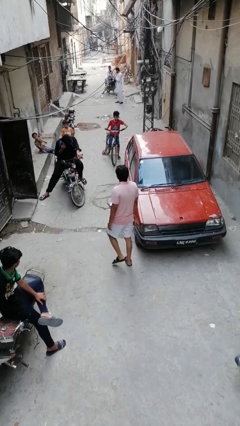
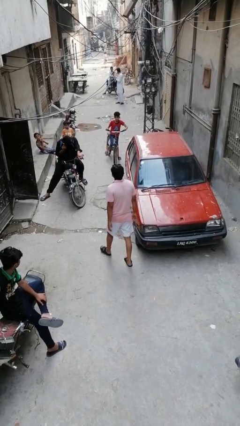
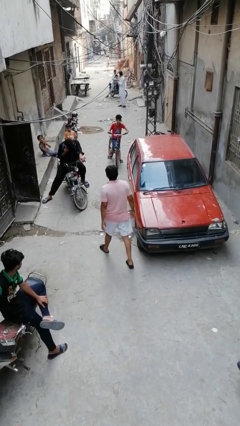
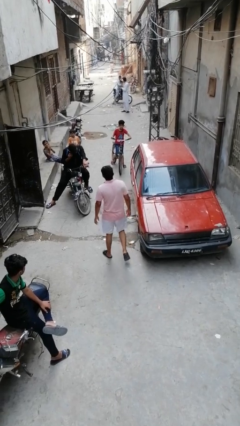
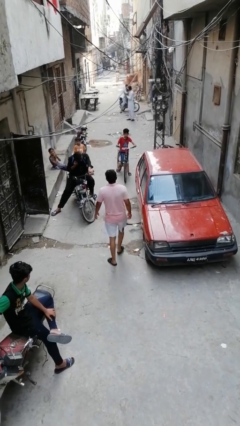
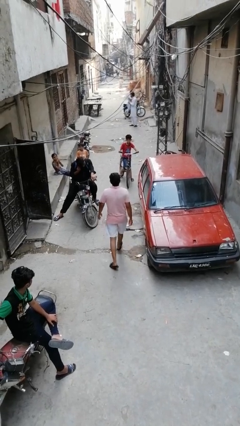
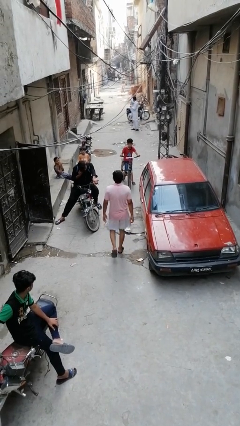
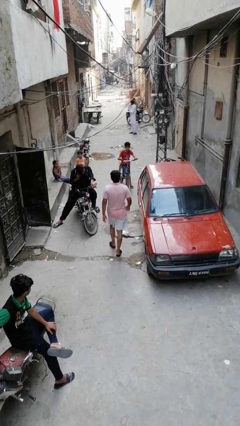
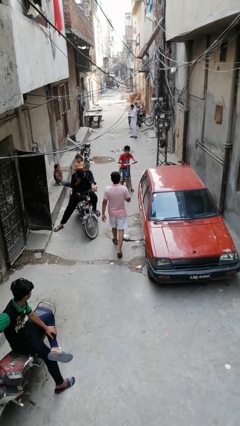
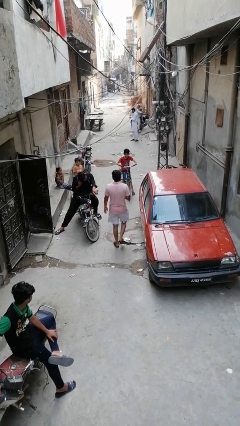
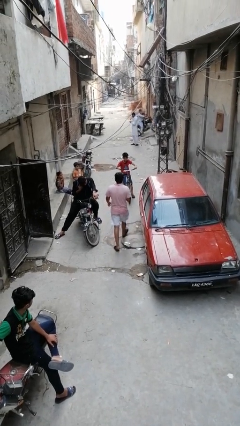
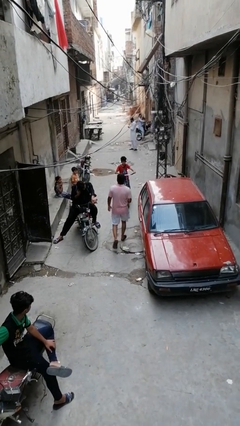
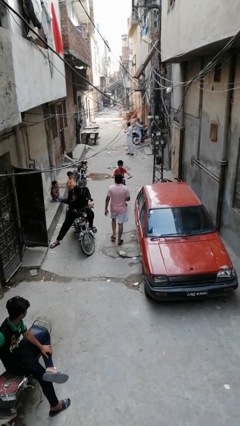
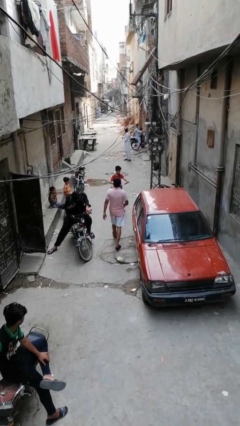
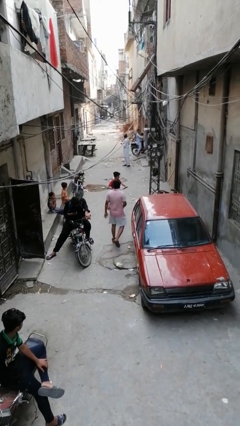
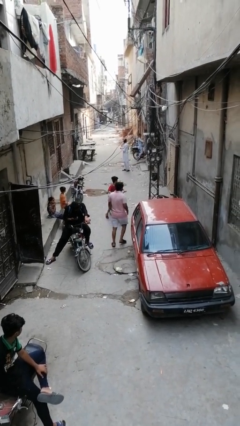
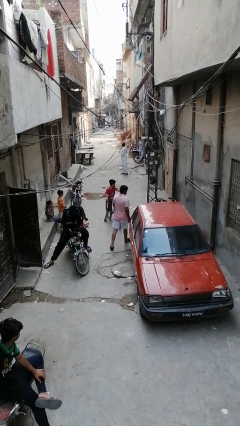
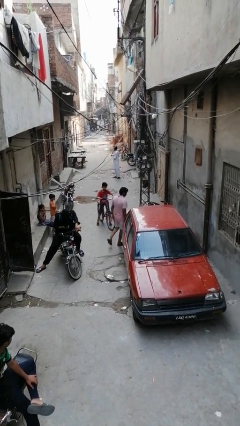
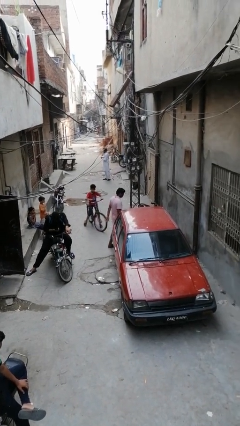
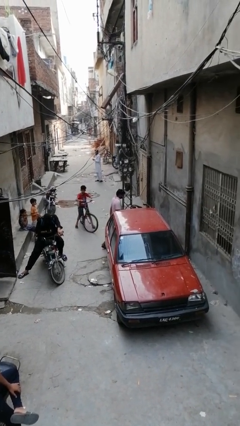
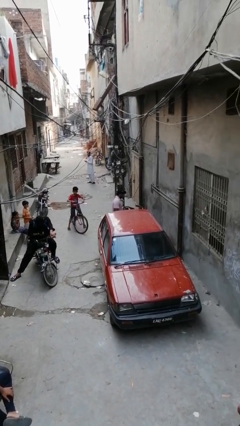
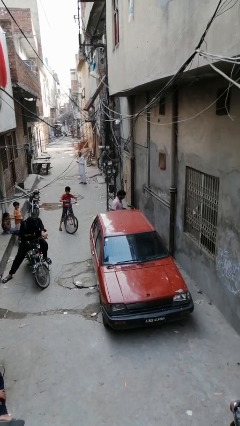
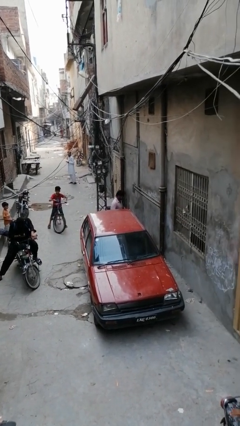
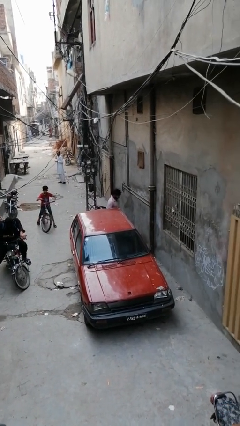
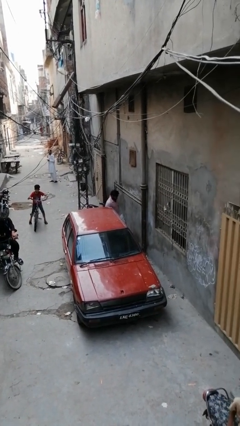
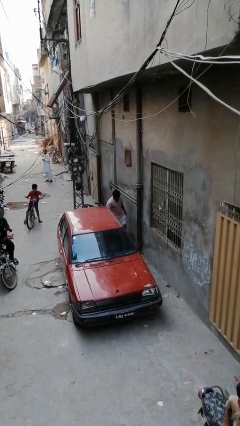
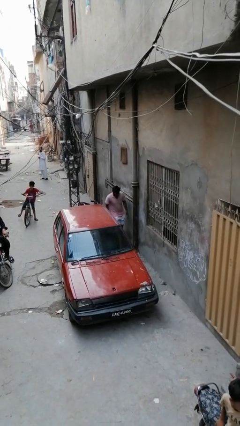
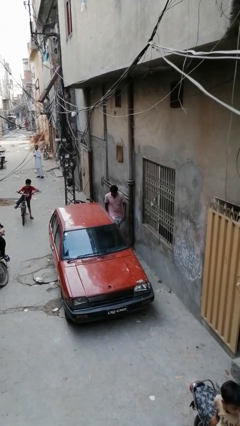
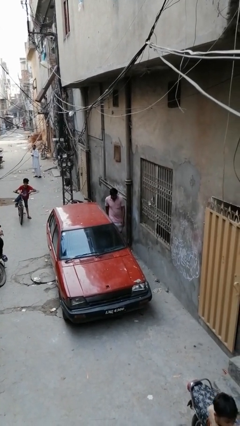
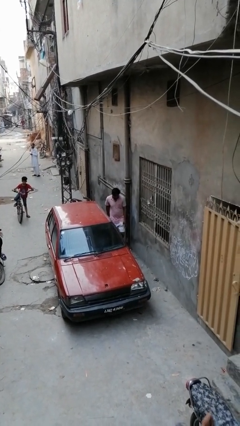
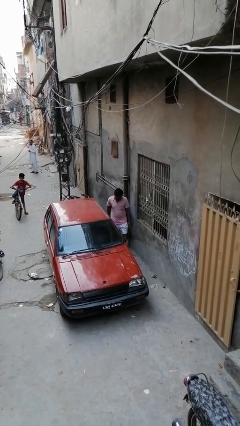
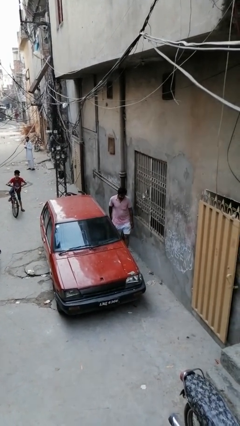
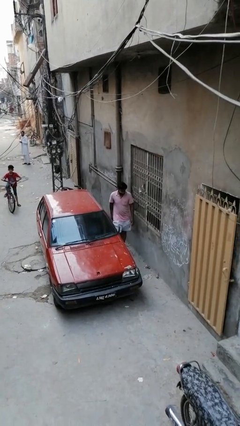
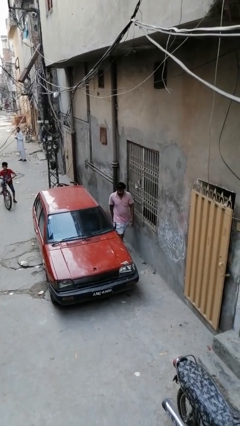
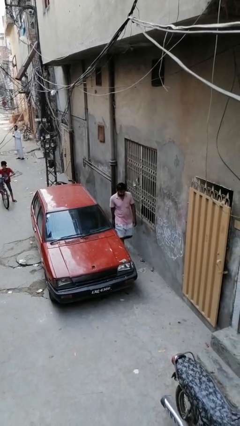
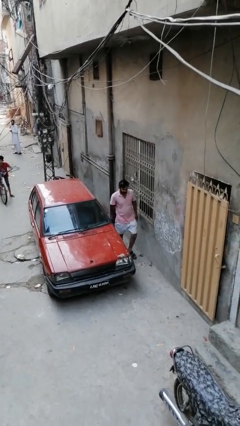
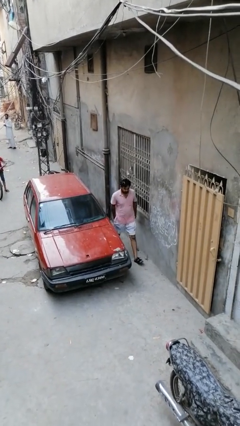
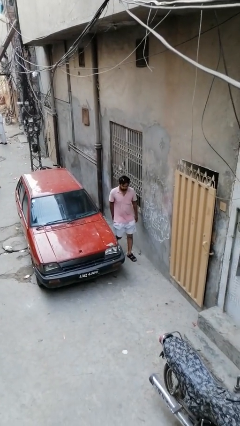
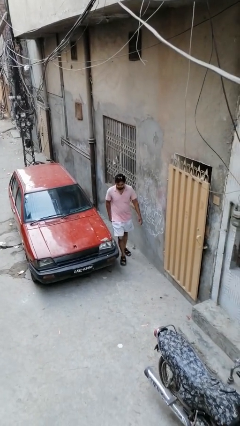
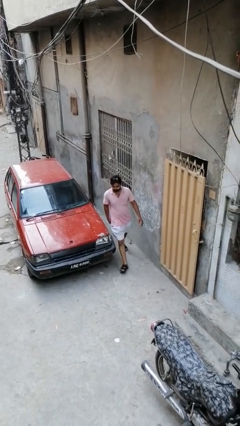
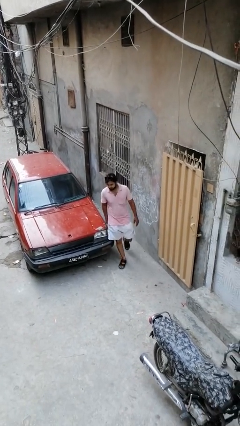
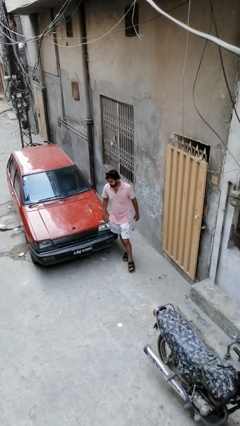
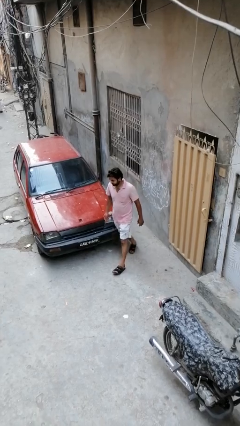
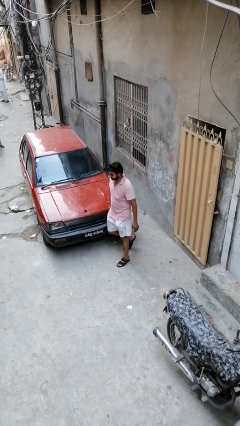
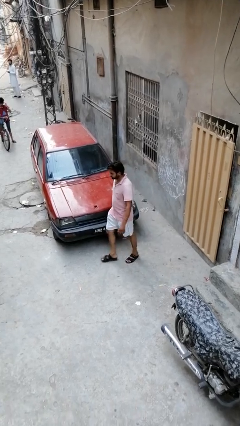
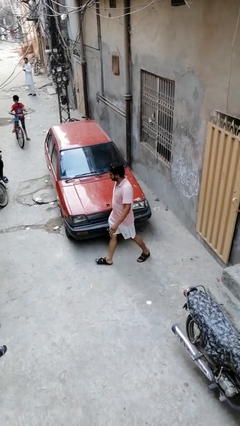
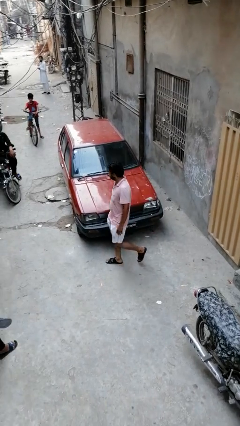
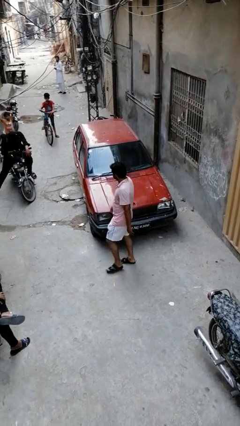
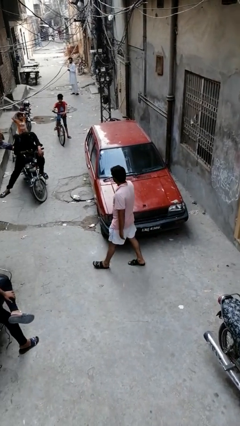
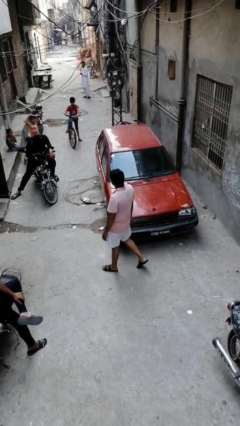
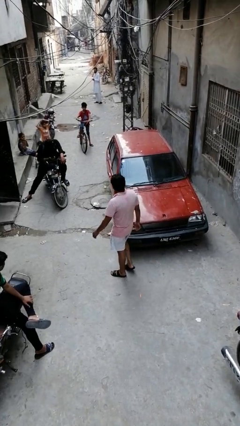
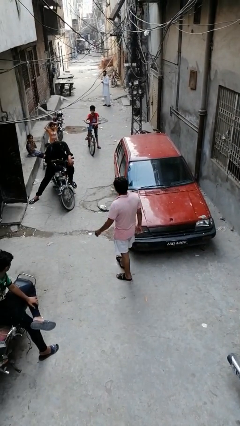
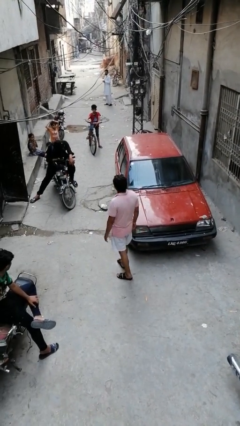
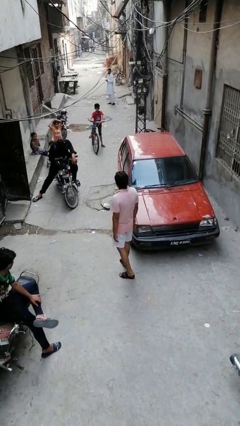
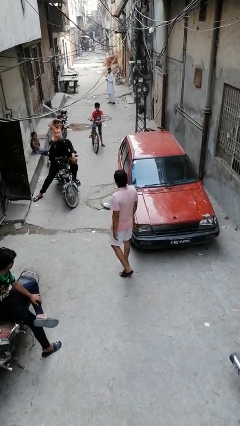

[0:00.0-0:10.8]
person walks around car

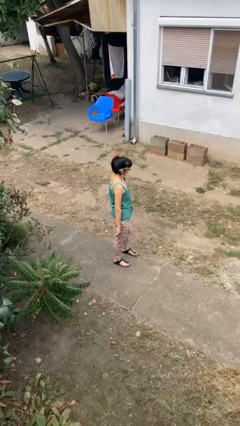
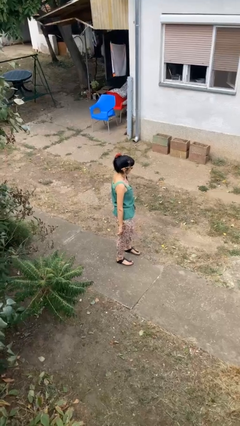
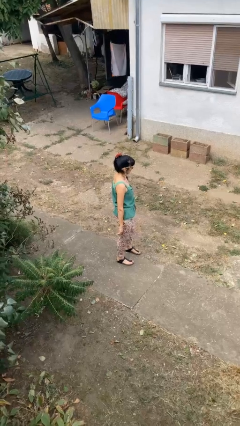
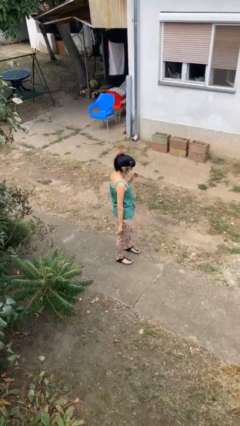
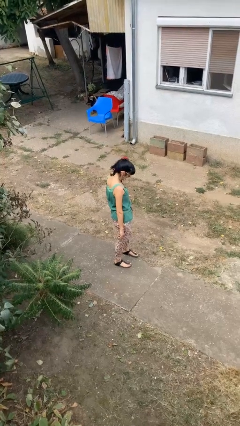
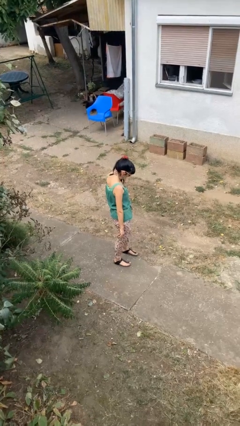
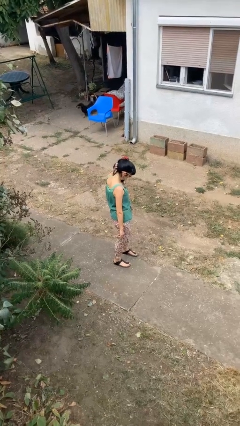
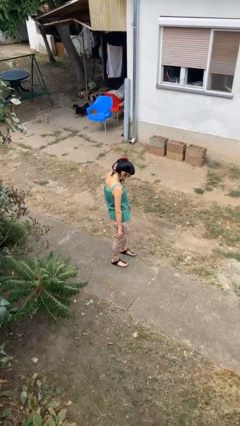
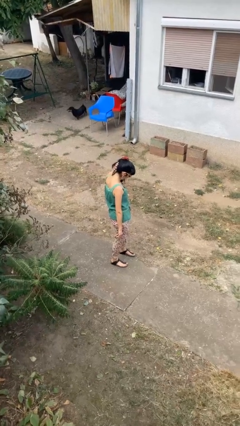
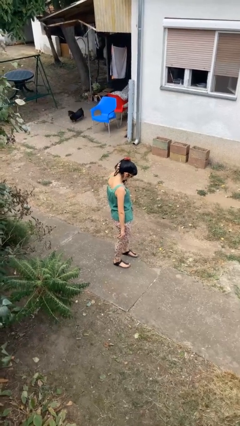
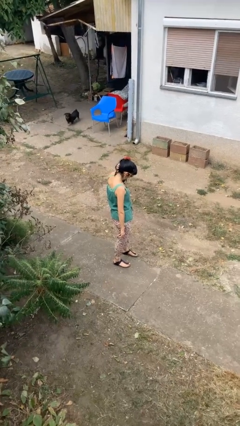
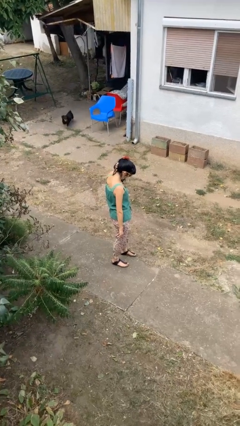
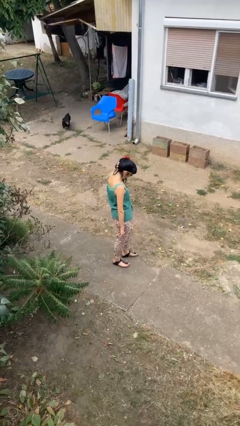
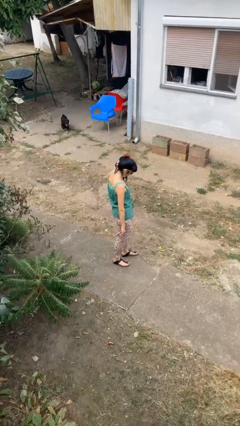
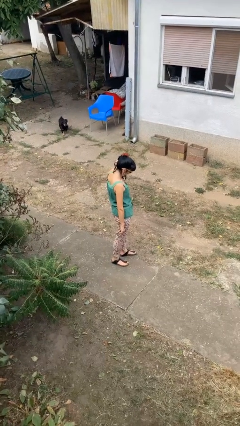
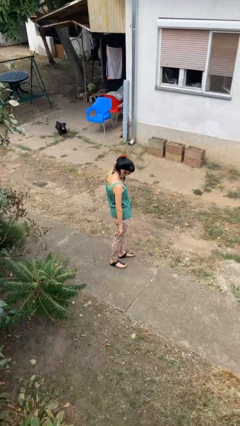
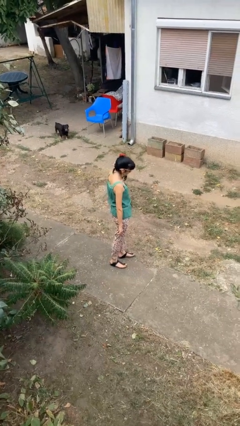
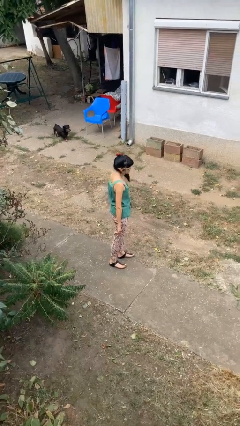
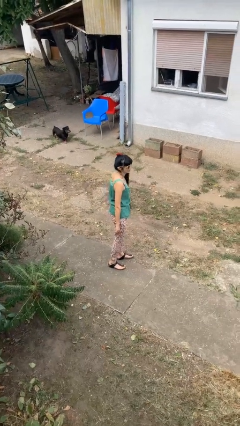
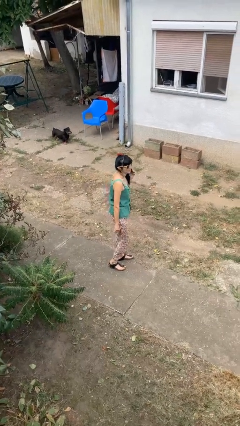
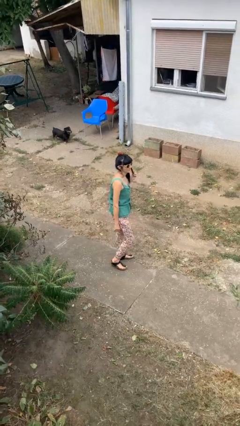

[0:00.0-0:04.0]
person scratches face

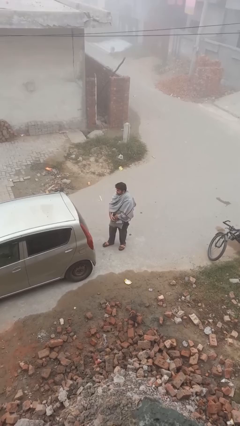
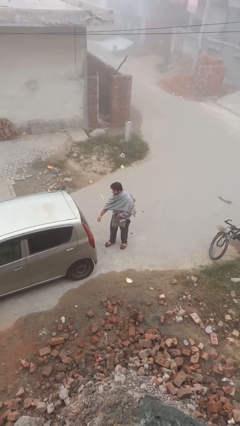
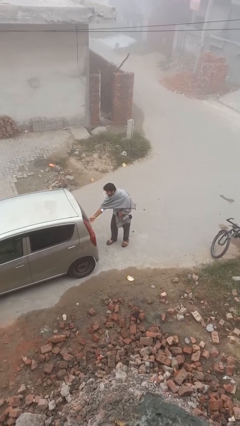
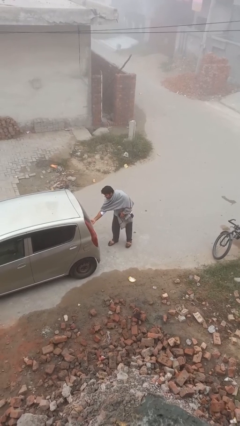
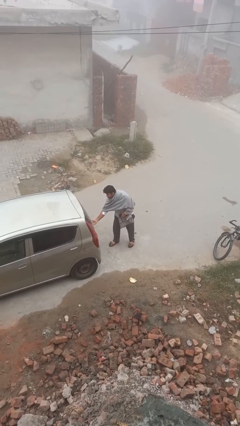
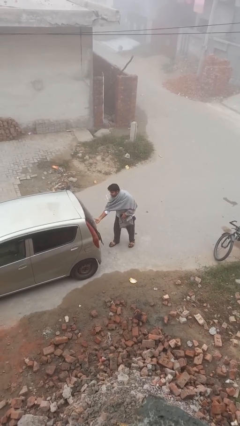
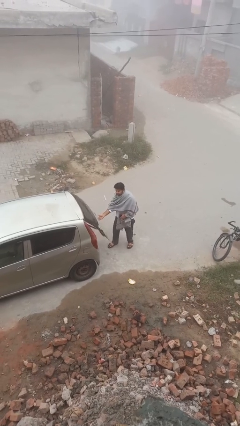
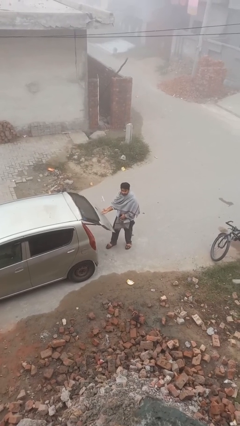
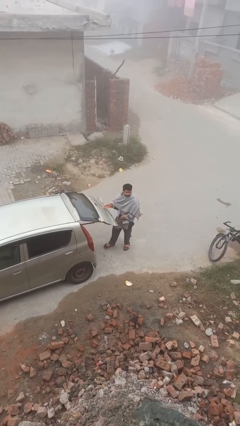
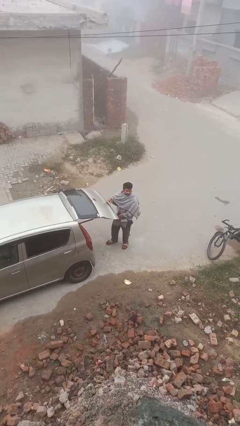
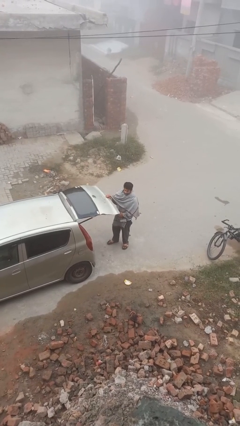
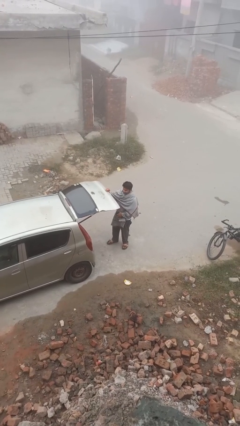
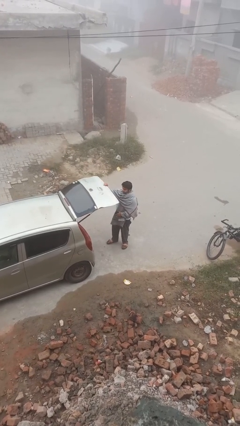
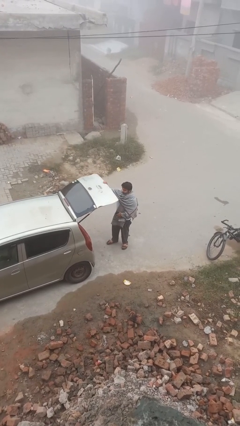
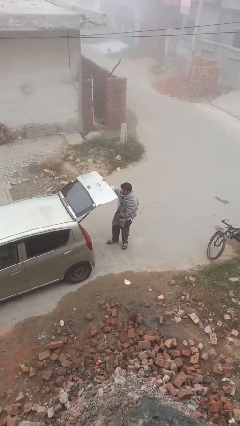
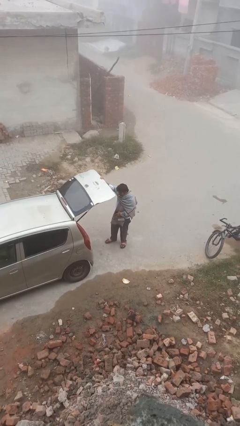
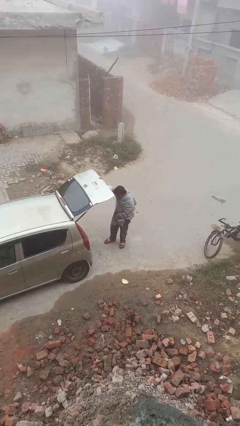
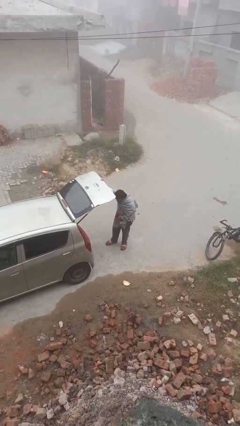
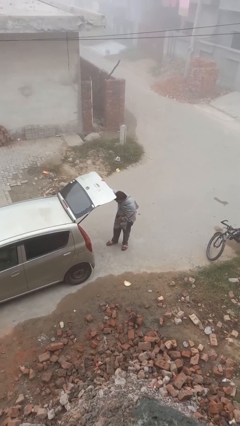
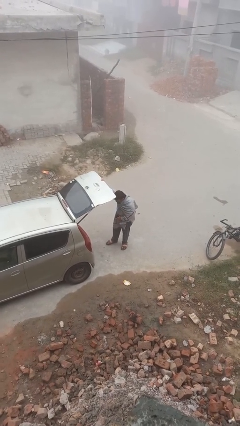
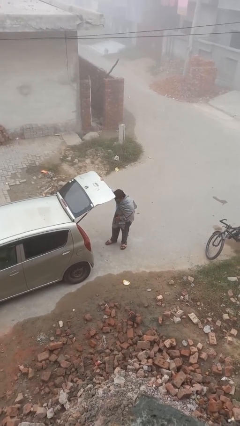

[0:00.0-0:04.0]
person opens car trunk
